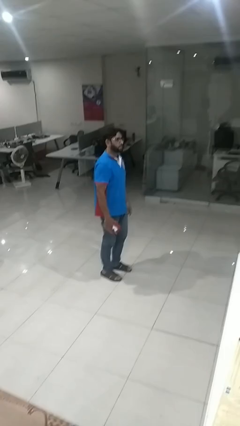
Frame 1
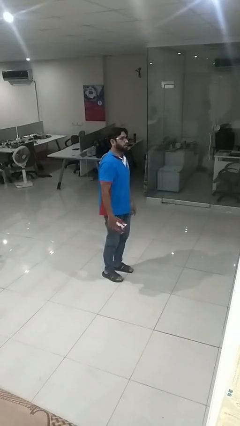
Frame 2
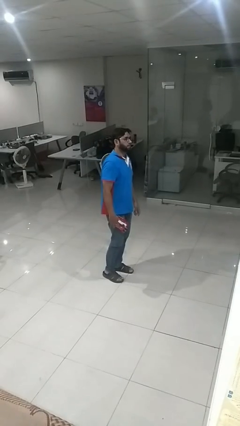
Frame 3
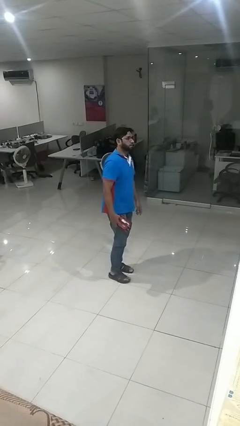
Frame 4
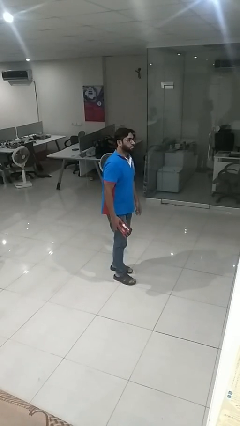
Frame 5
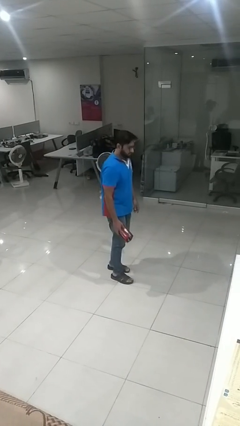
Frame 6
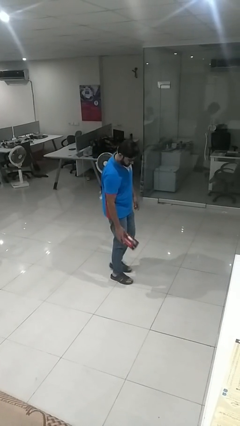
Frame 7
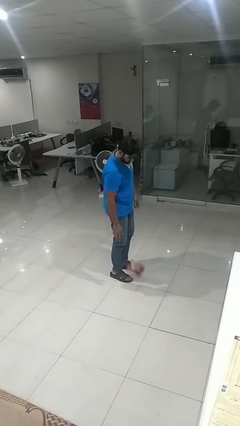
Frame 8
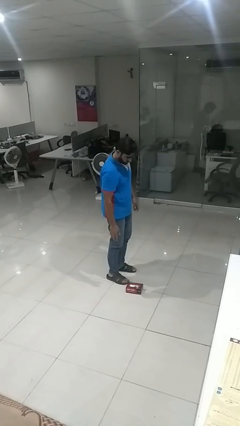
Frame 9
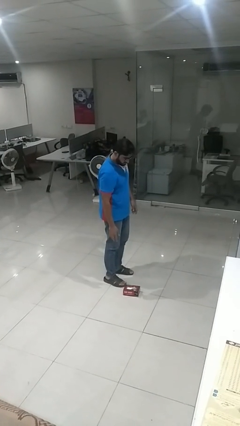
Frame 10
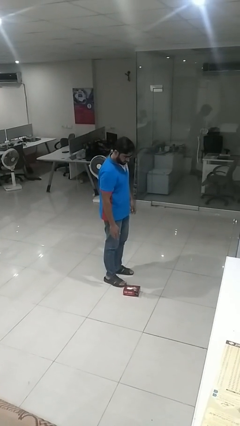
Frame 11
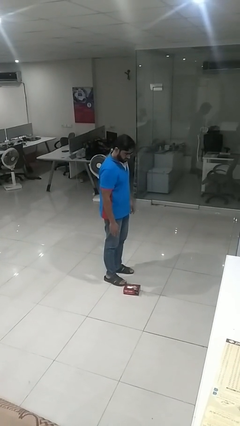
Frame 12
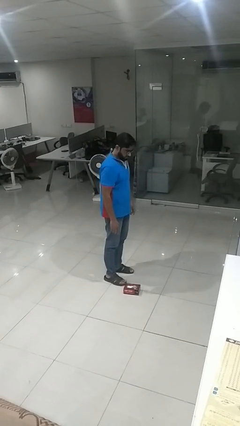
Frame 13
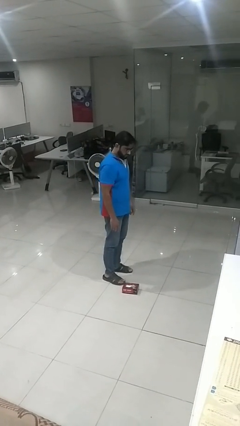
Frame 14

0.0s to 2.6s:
person drops object

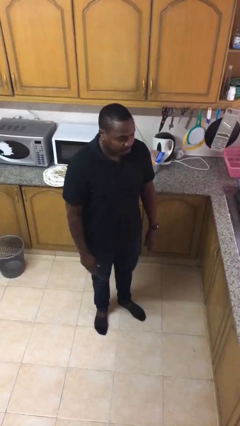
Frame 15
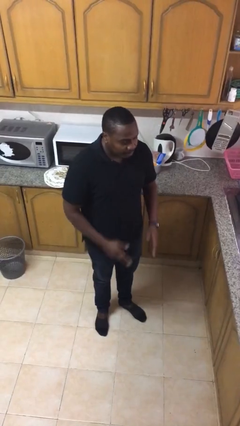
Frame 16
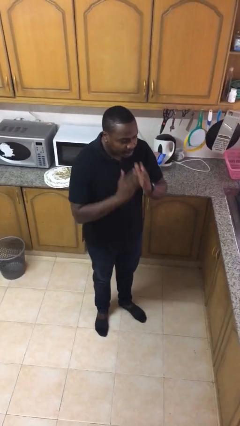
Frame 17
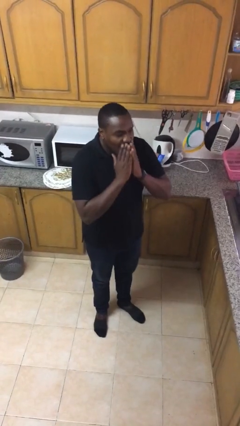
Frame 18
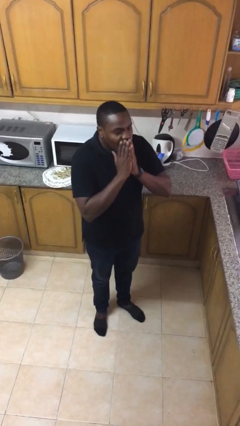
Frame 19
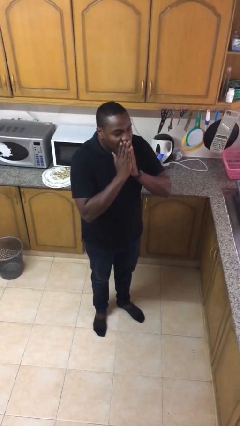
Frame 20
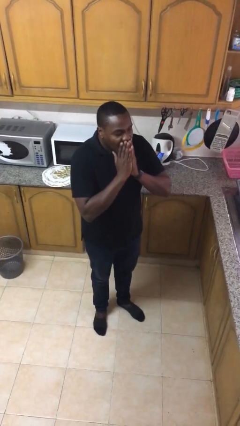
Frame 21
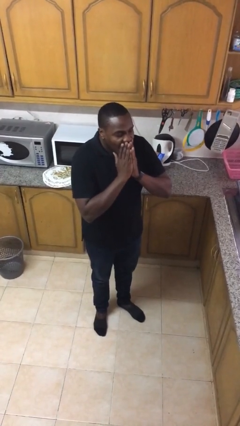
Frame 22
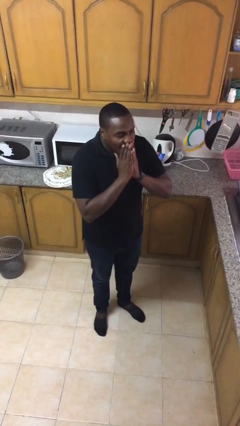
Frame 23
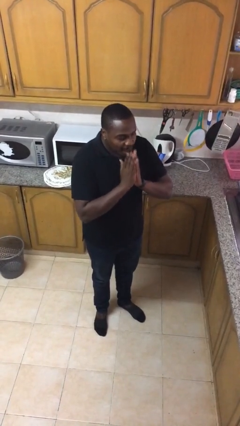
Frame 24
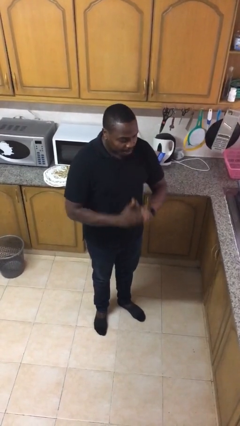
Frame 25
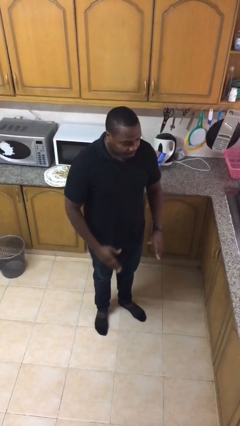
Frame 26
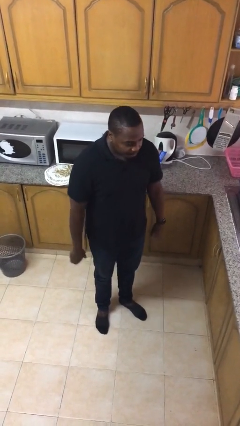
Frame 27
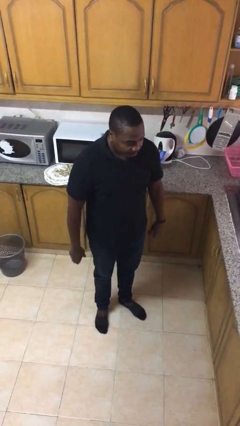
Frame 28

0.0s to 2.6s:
person yawns

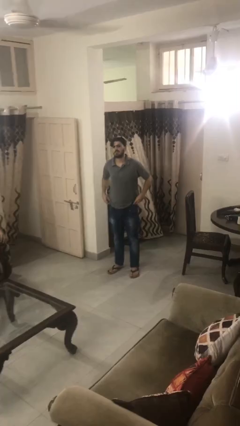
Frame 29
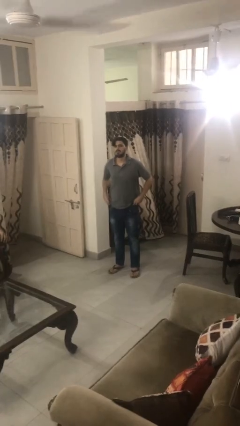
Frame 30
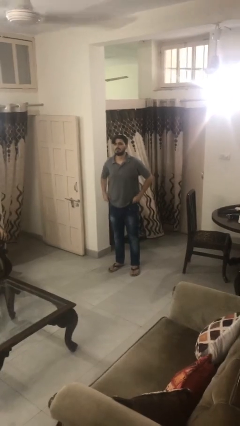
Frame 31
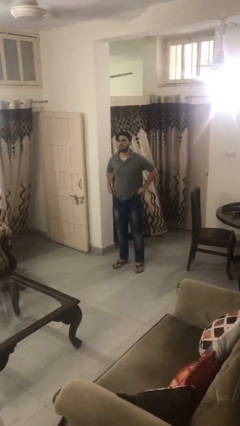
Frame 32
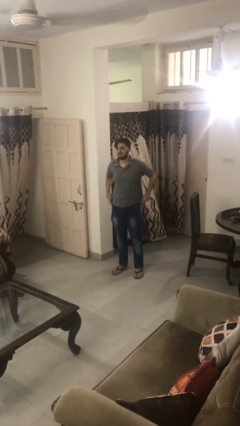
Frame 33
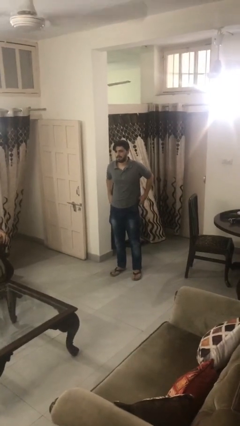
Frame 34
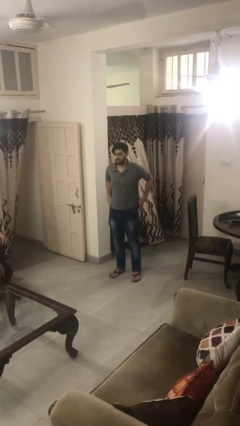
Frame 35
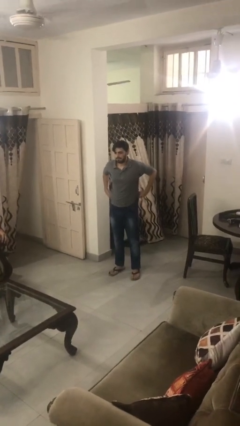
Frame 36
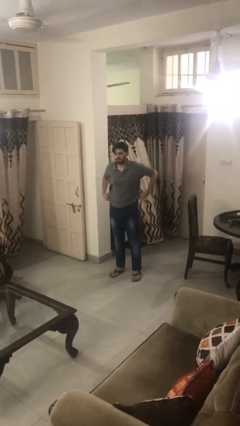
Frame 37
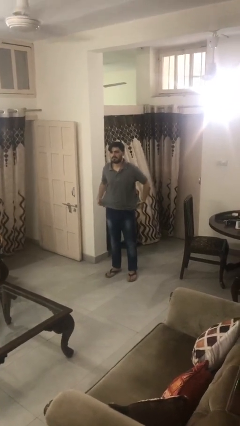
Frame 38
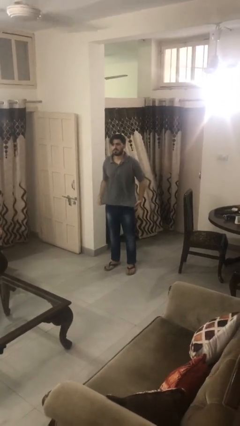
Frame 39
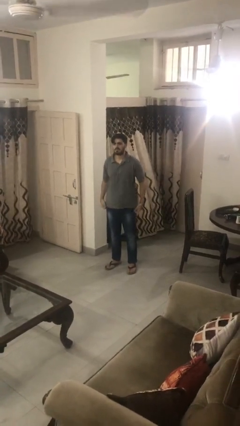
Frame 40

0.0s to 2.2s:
person hikes up pants

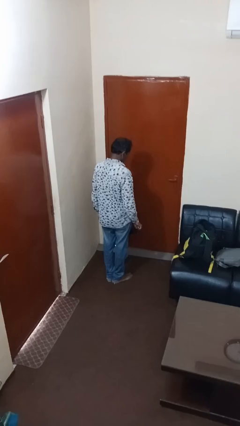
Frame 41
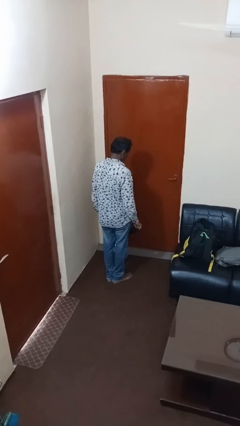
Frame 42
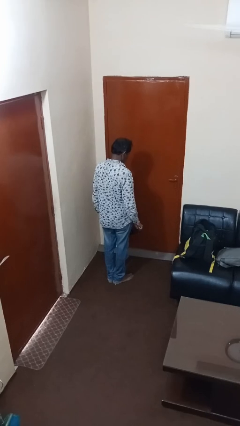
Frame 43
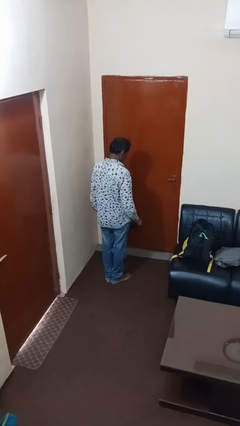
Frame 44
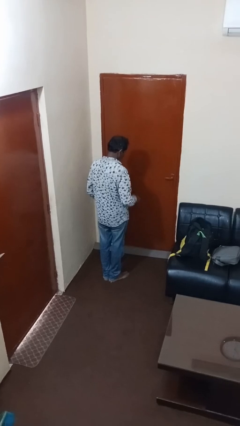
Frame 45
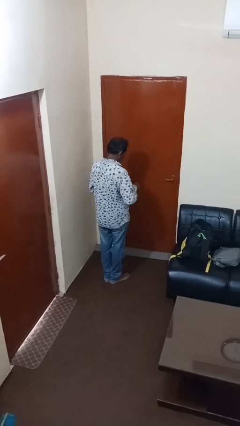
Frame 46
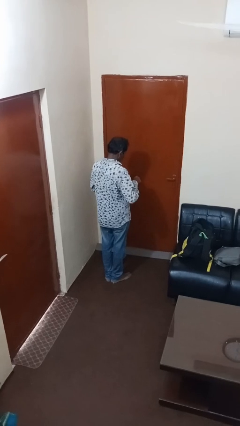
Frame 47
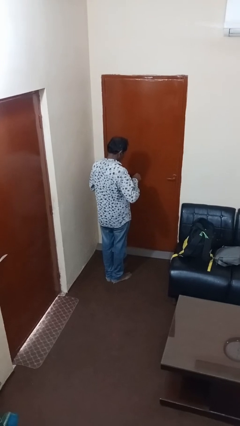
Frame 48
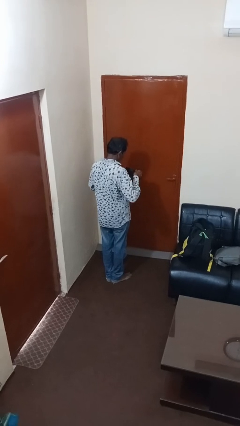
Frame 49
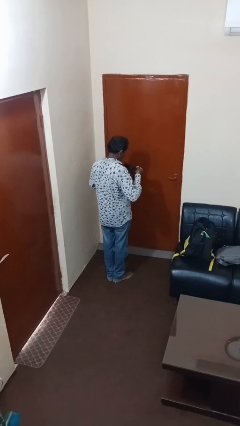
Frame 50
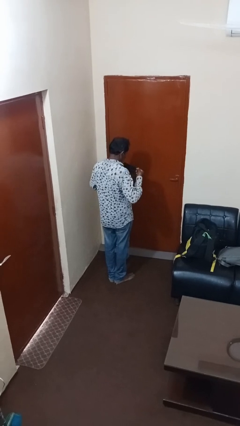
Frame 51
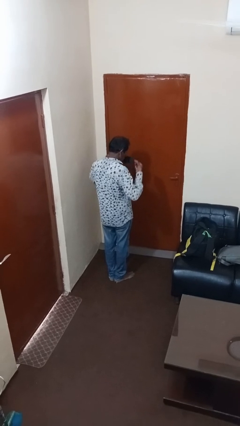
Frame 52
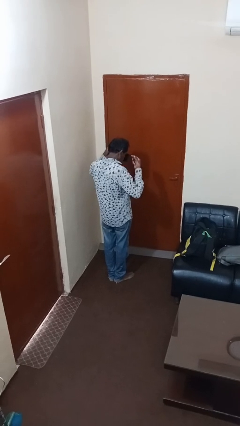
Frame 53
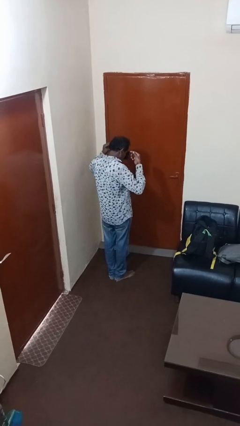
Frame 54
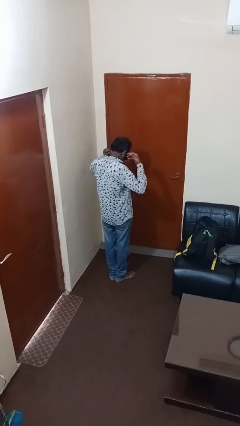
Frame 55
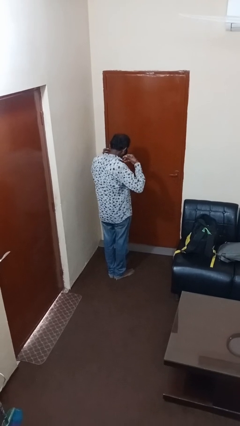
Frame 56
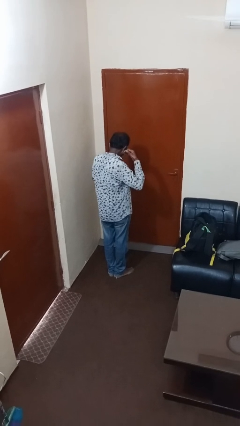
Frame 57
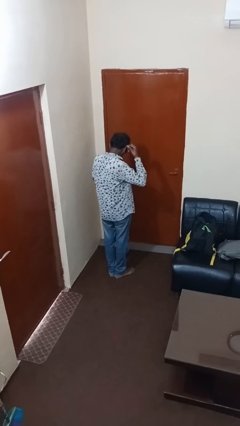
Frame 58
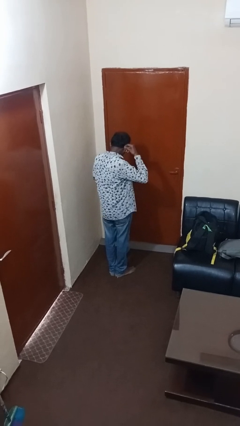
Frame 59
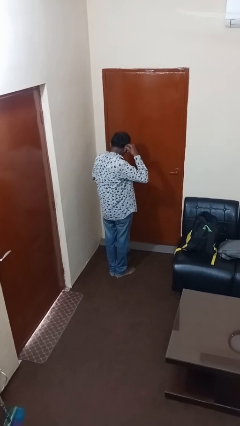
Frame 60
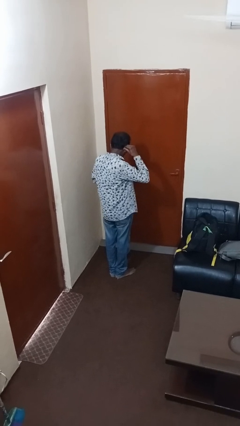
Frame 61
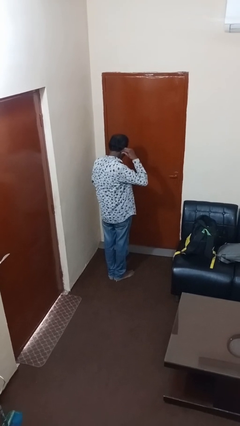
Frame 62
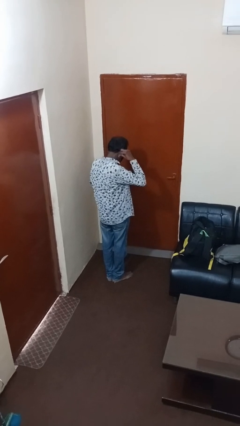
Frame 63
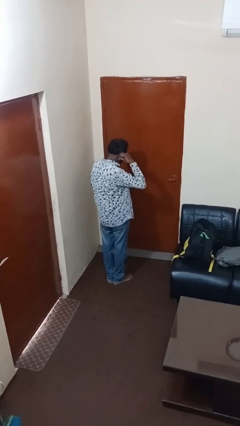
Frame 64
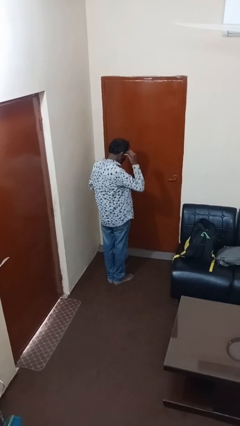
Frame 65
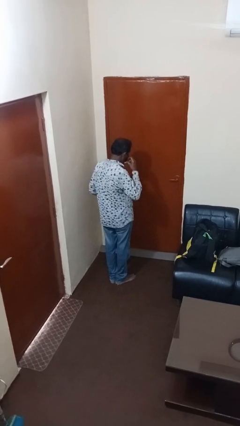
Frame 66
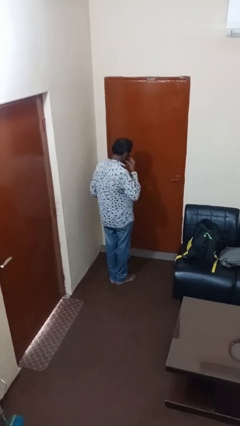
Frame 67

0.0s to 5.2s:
person puts on facemask

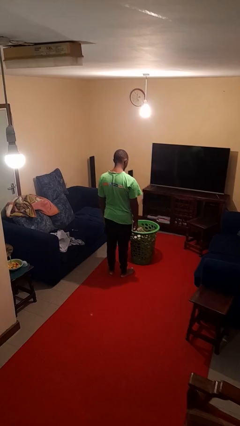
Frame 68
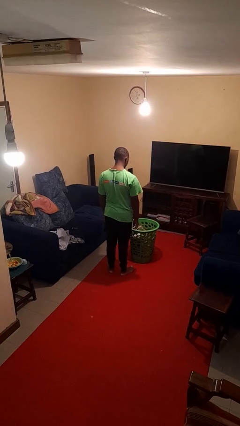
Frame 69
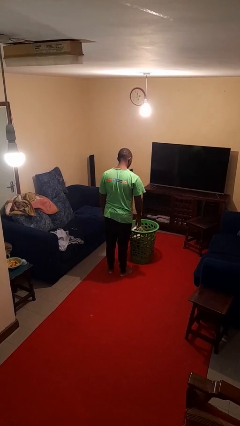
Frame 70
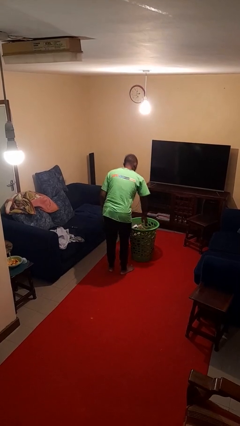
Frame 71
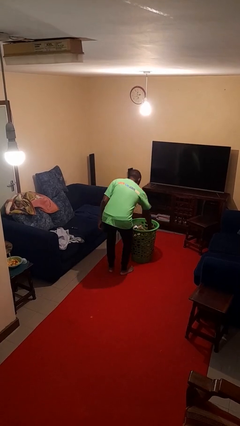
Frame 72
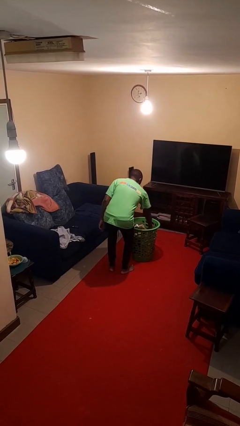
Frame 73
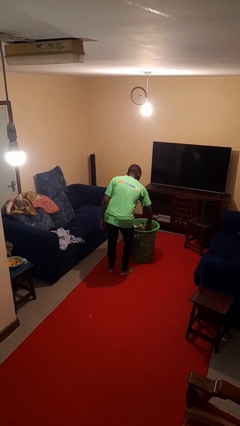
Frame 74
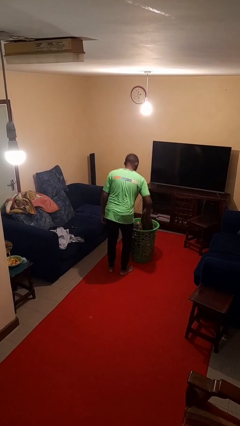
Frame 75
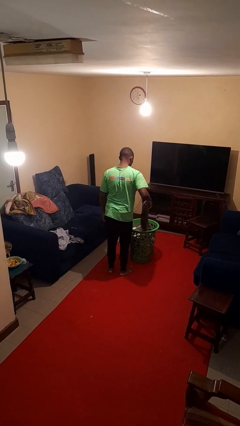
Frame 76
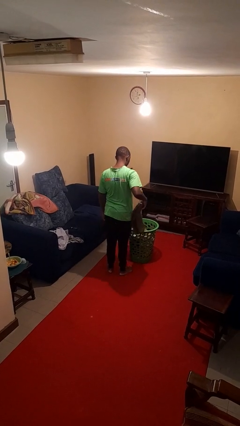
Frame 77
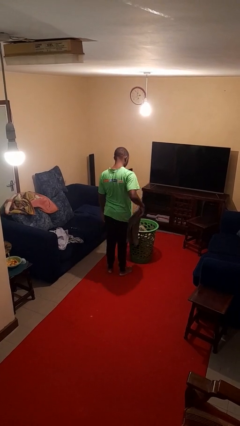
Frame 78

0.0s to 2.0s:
person takes object from basket

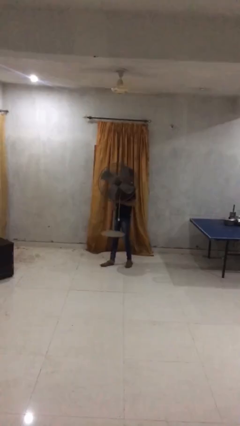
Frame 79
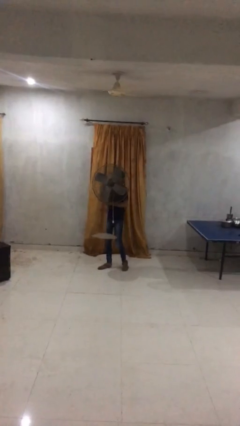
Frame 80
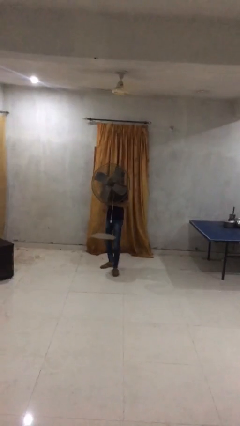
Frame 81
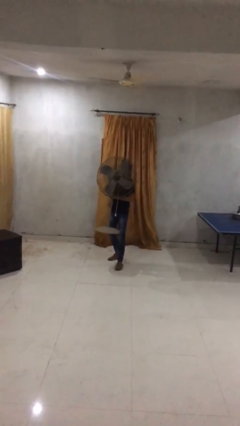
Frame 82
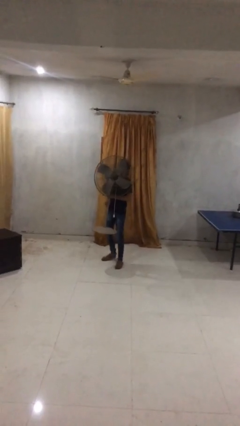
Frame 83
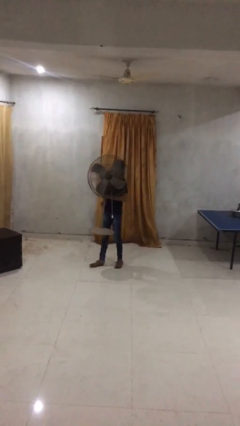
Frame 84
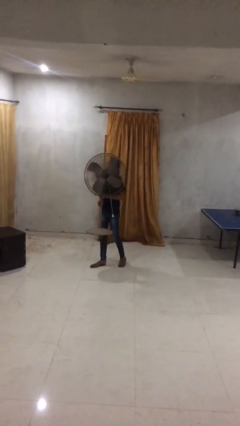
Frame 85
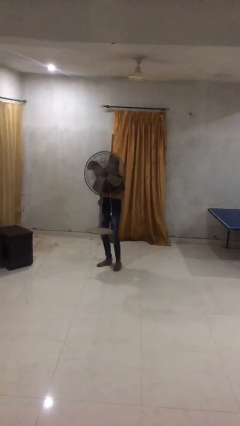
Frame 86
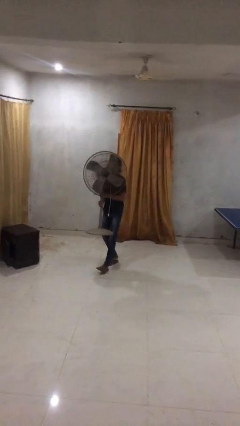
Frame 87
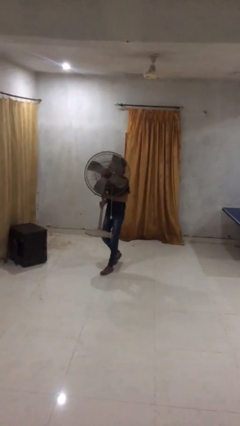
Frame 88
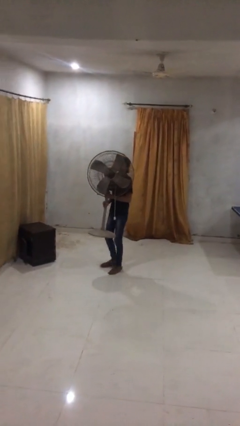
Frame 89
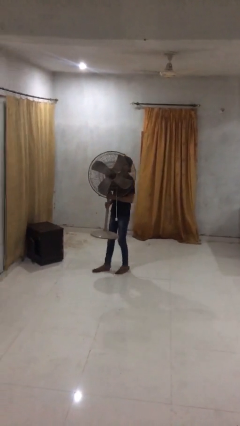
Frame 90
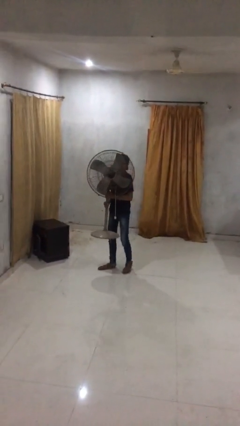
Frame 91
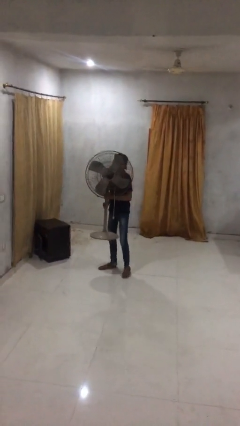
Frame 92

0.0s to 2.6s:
person carries heavy object

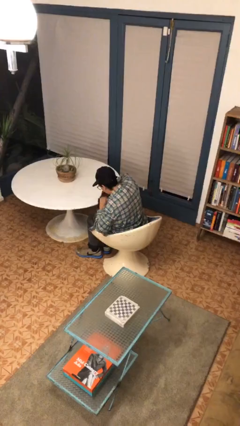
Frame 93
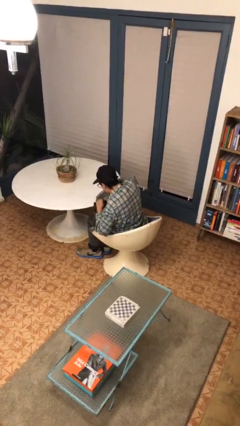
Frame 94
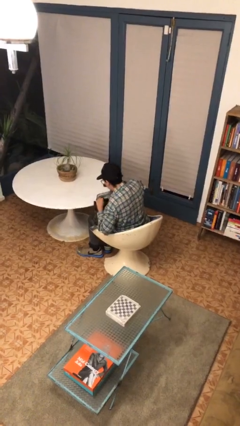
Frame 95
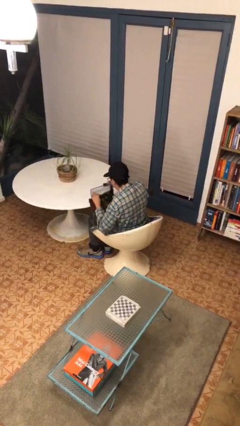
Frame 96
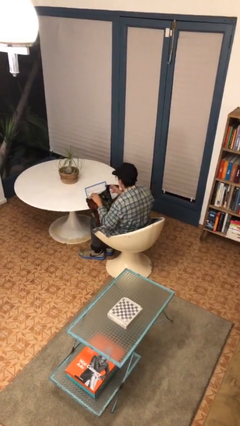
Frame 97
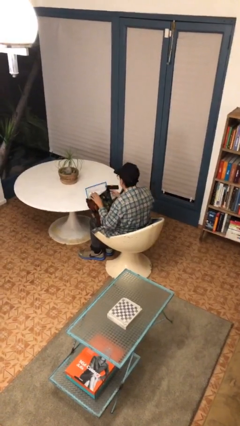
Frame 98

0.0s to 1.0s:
person searches in bag
